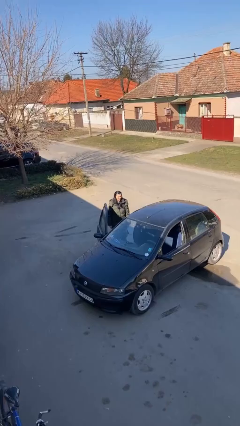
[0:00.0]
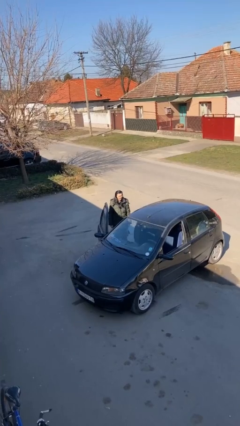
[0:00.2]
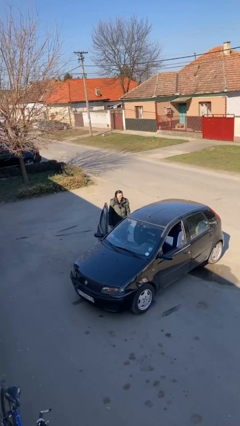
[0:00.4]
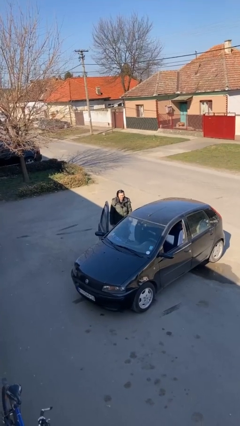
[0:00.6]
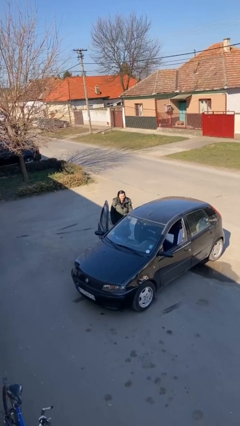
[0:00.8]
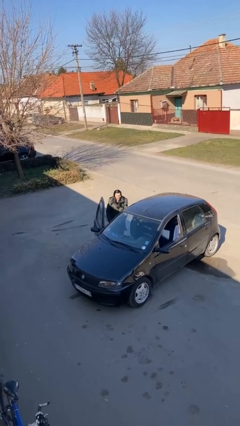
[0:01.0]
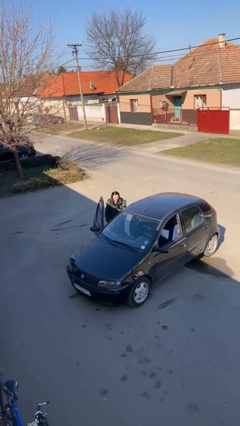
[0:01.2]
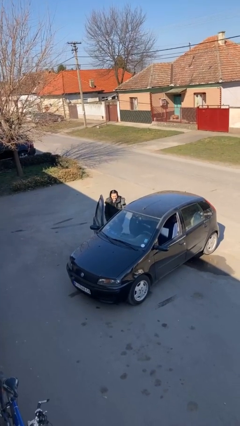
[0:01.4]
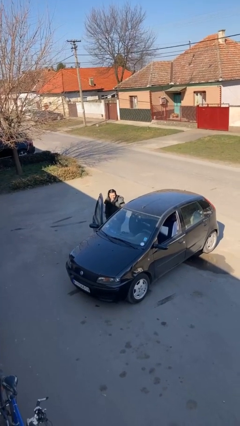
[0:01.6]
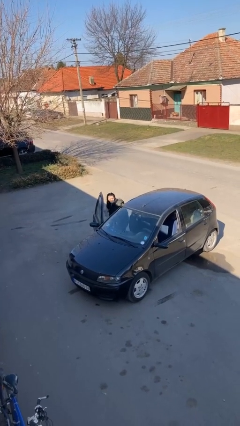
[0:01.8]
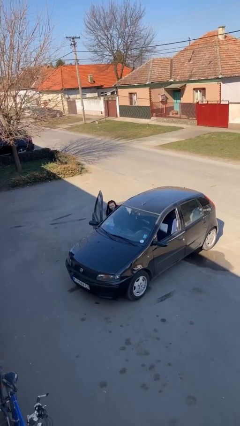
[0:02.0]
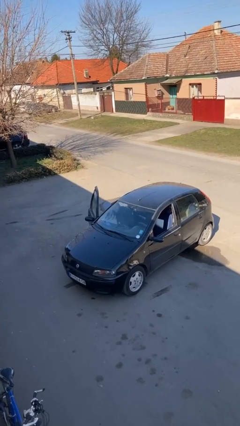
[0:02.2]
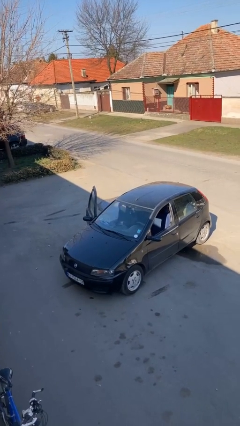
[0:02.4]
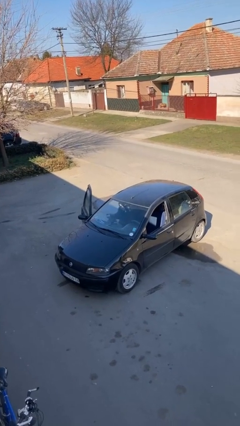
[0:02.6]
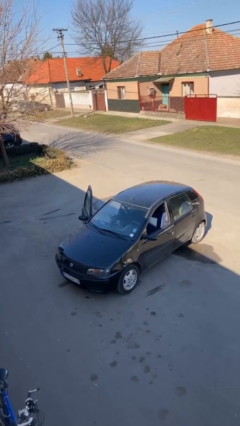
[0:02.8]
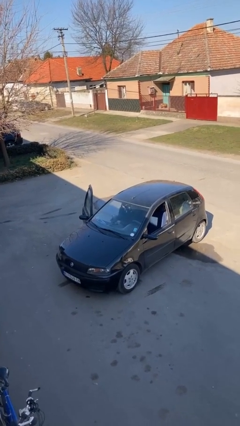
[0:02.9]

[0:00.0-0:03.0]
person enters car

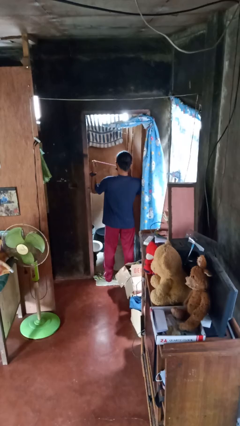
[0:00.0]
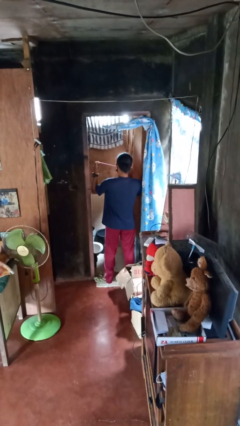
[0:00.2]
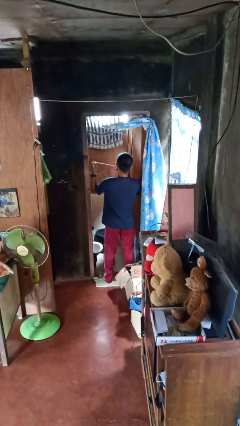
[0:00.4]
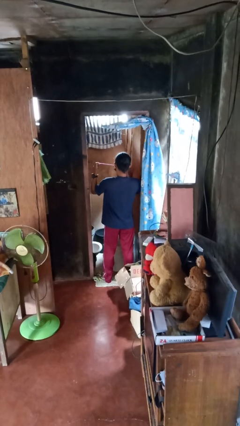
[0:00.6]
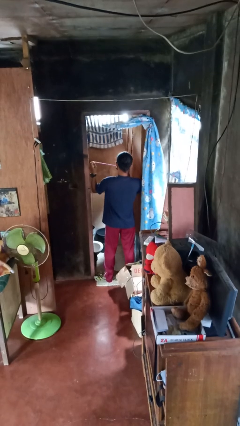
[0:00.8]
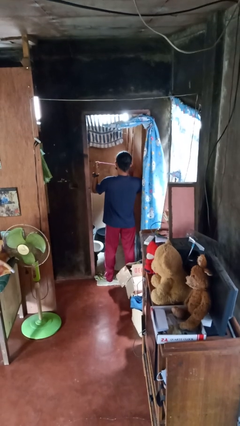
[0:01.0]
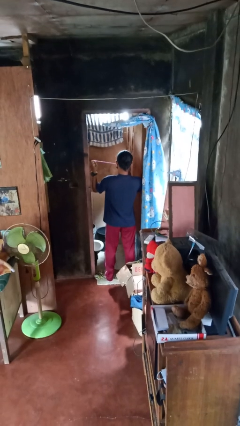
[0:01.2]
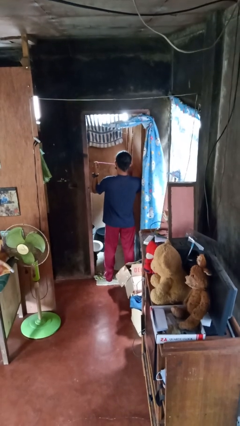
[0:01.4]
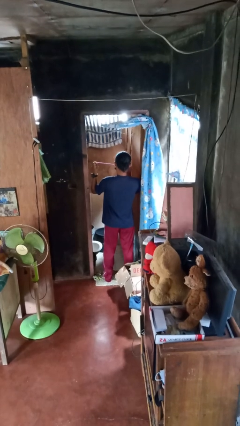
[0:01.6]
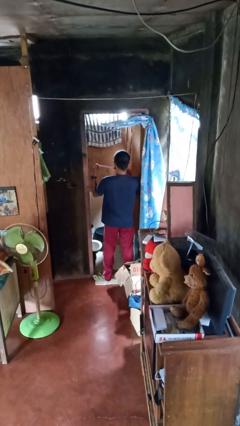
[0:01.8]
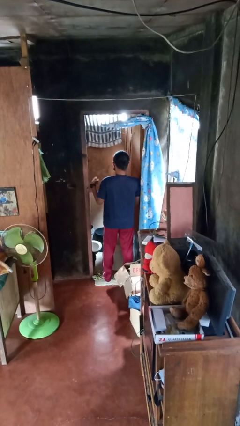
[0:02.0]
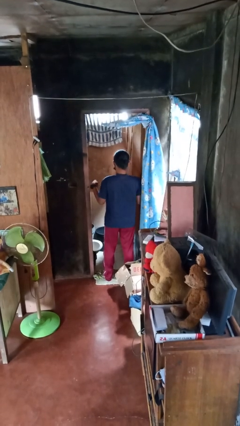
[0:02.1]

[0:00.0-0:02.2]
person flosses

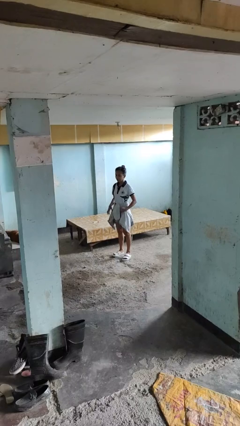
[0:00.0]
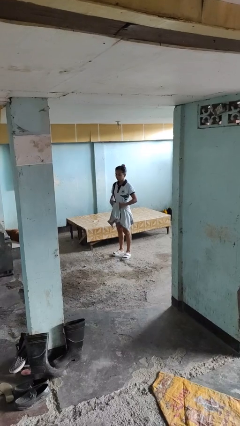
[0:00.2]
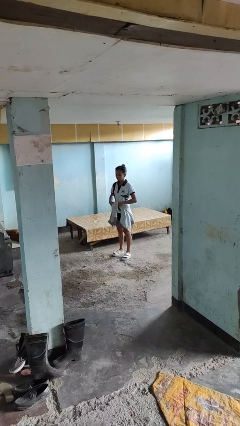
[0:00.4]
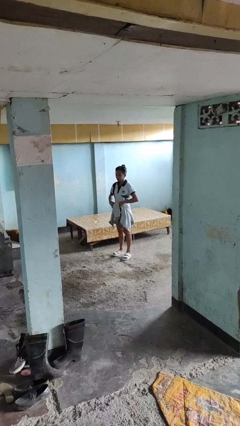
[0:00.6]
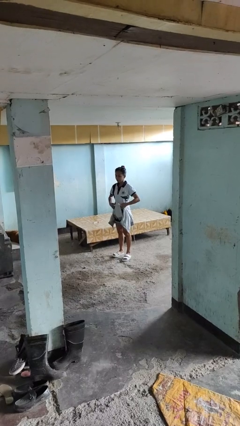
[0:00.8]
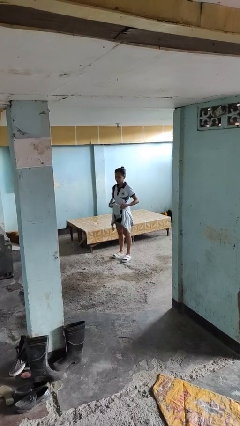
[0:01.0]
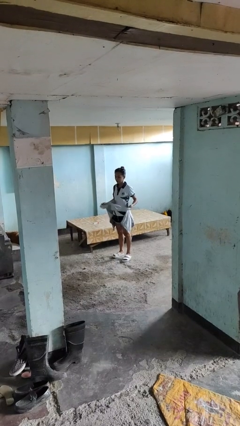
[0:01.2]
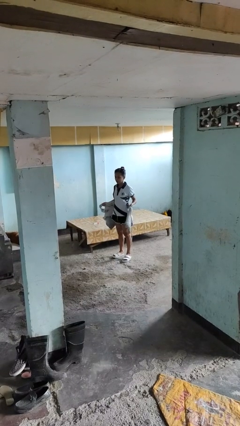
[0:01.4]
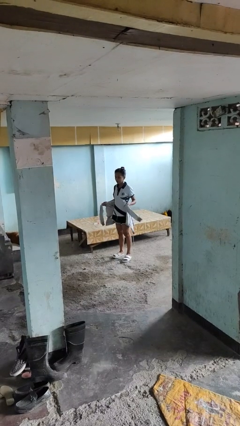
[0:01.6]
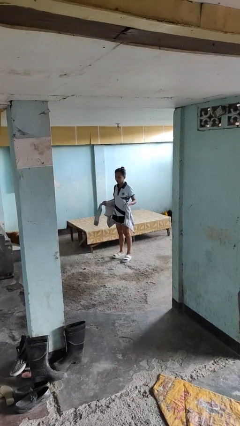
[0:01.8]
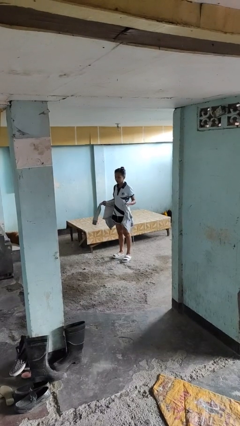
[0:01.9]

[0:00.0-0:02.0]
person unties jacket around waist

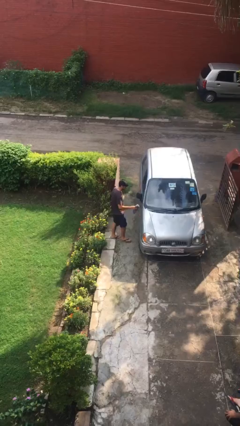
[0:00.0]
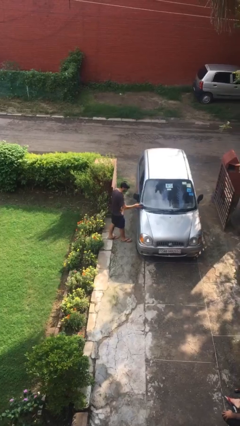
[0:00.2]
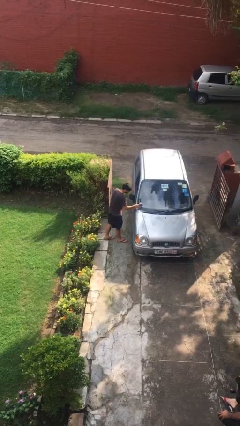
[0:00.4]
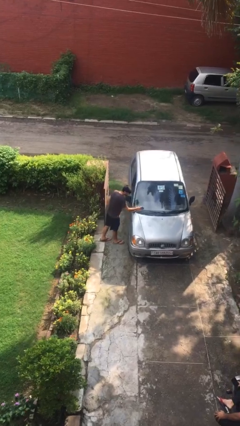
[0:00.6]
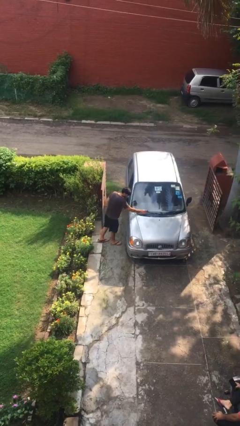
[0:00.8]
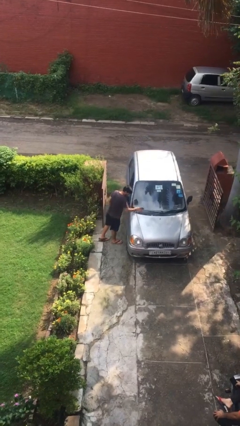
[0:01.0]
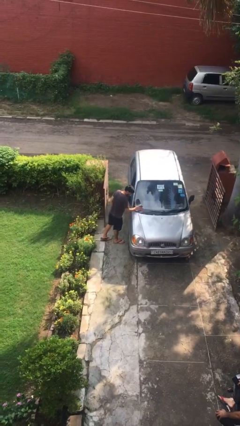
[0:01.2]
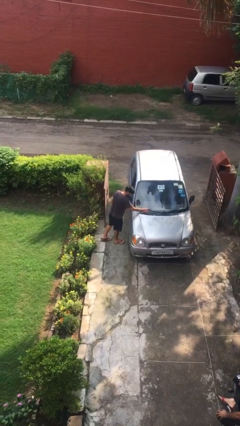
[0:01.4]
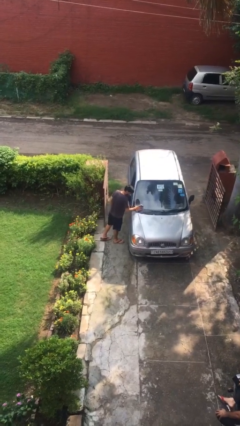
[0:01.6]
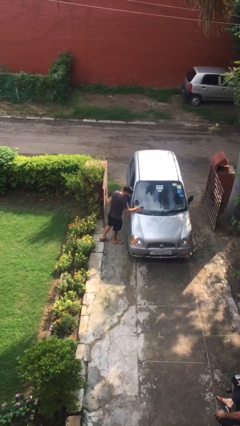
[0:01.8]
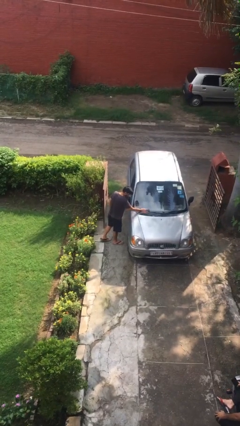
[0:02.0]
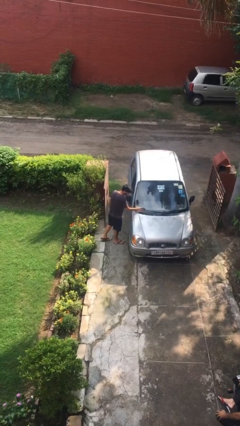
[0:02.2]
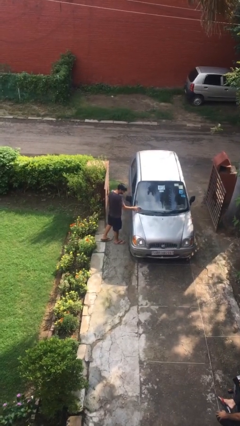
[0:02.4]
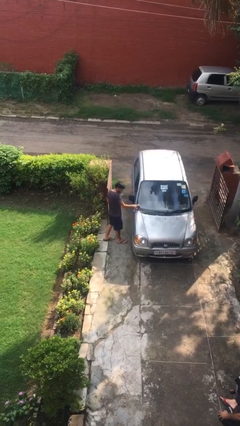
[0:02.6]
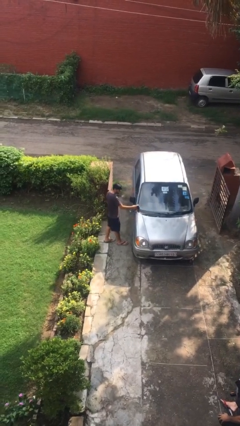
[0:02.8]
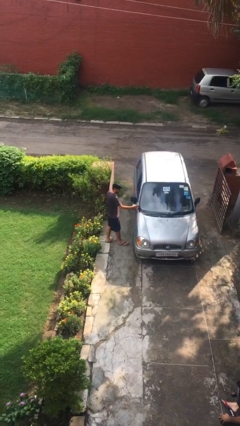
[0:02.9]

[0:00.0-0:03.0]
person polishes car with rag

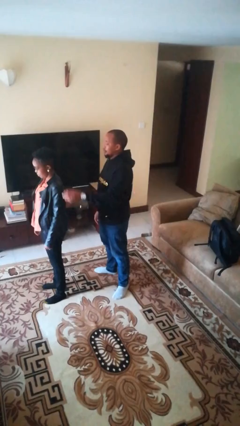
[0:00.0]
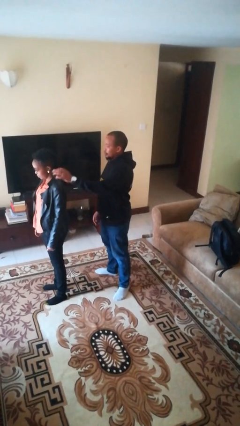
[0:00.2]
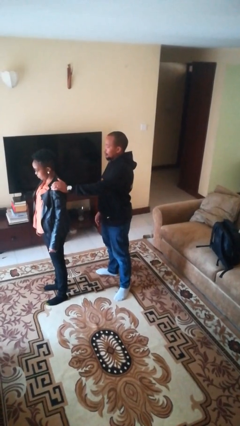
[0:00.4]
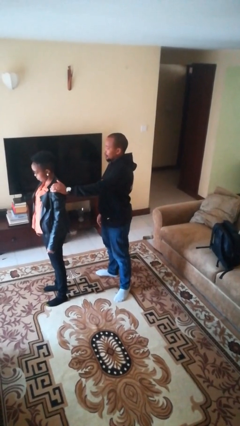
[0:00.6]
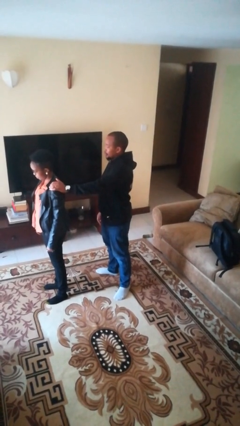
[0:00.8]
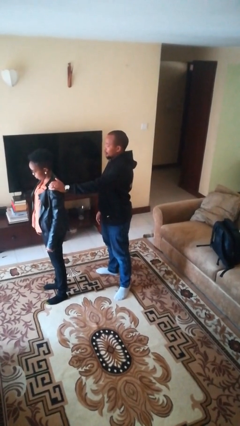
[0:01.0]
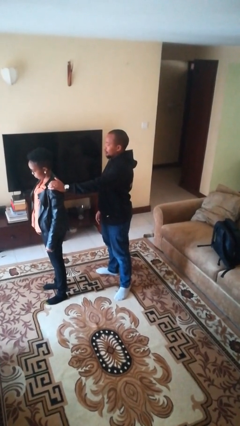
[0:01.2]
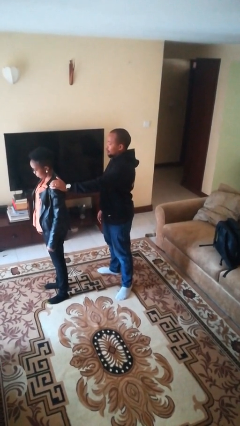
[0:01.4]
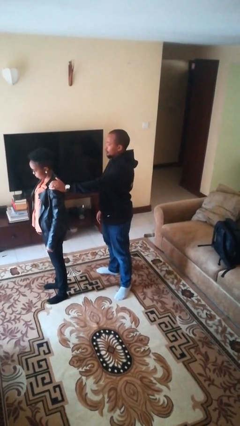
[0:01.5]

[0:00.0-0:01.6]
person grabs person by shoulder

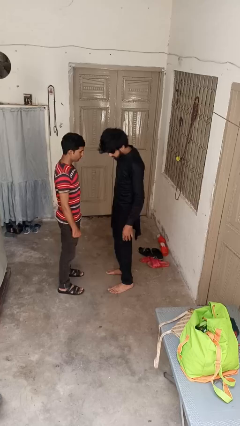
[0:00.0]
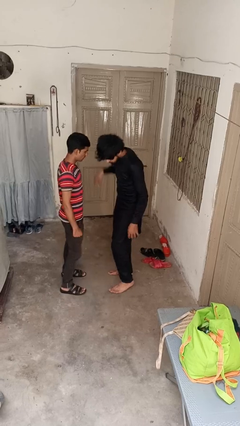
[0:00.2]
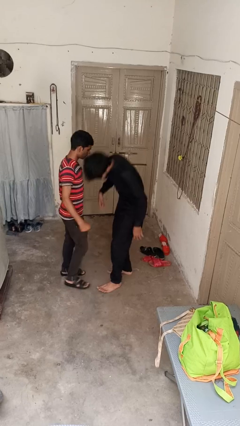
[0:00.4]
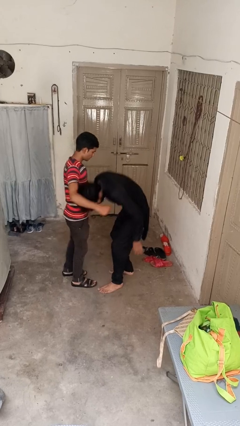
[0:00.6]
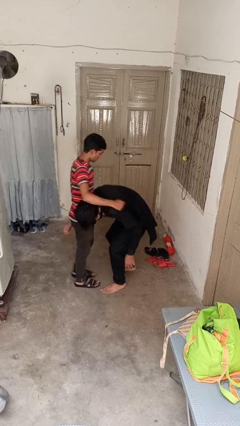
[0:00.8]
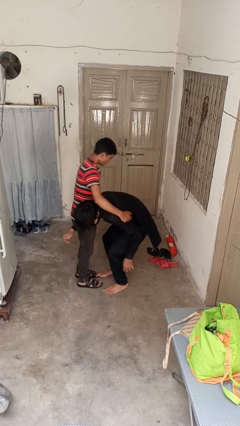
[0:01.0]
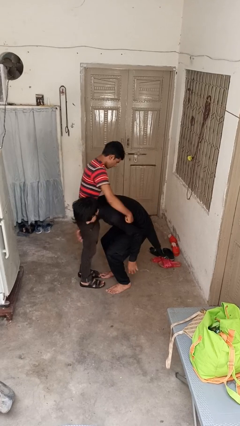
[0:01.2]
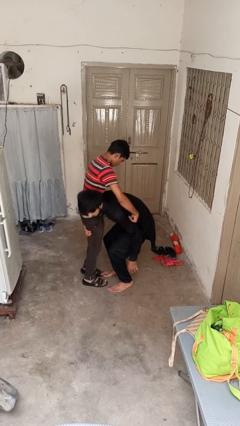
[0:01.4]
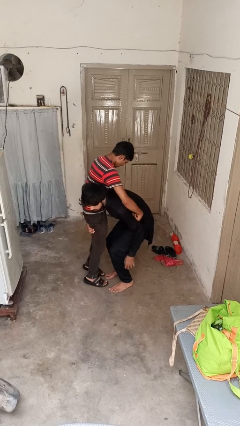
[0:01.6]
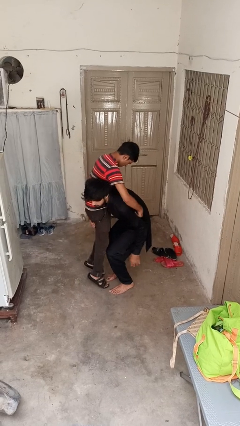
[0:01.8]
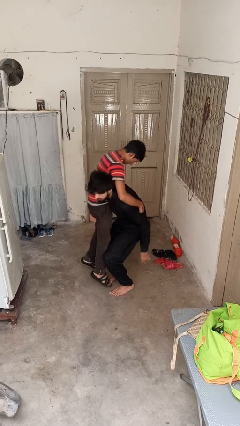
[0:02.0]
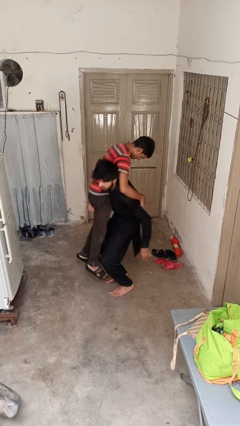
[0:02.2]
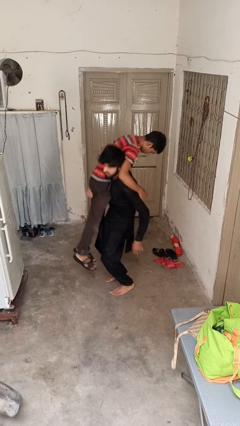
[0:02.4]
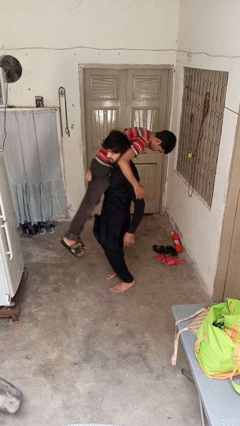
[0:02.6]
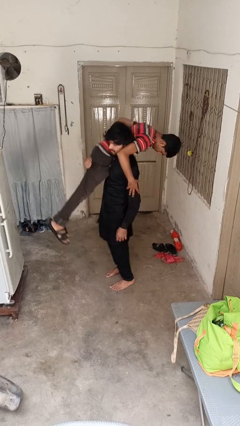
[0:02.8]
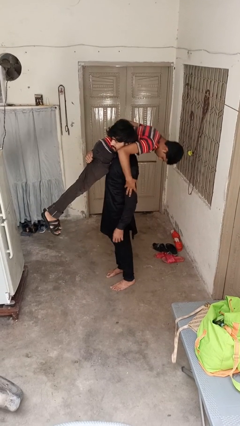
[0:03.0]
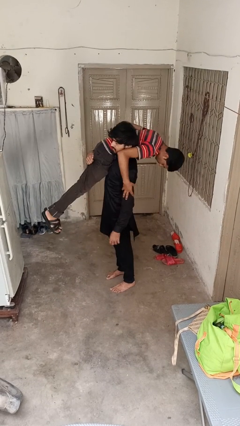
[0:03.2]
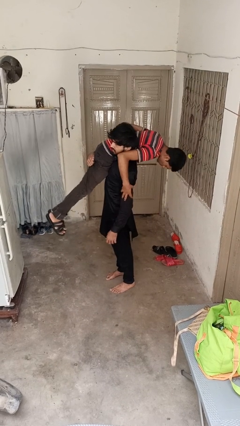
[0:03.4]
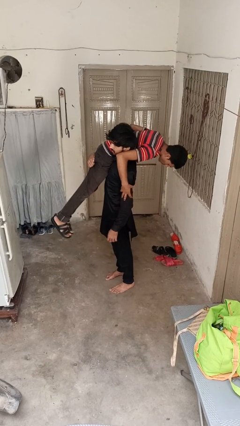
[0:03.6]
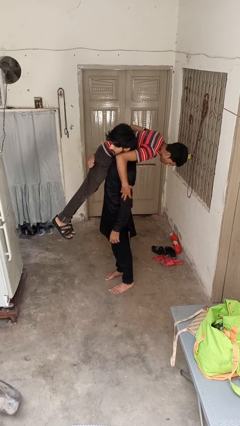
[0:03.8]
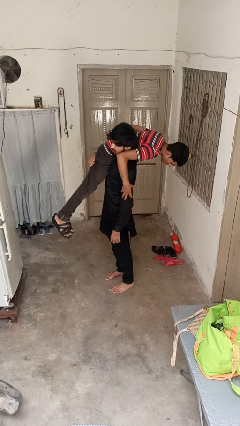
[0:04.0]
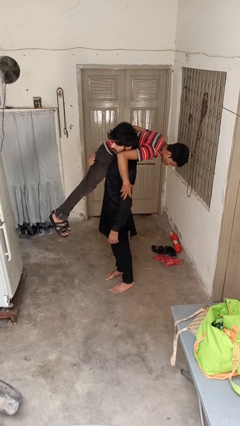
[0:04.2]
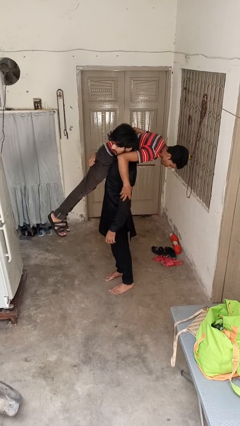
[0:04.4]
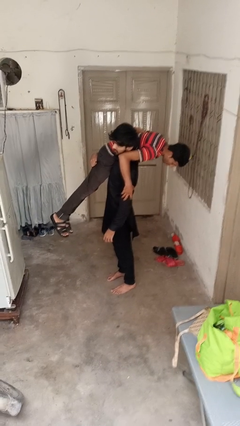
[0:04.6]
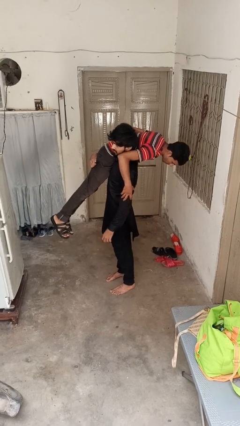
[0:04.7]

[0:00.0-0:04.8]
person carries person over shoulder

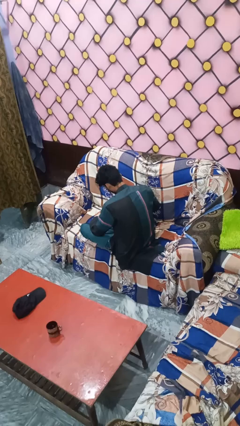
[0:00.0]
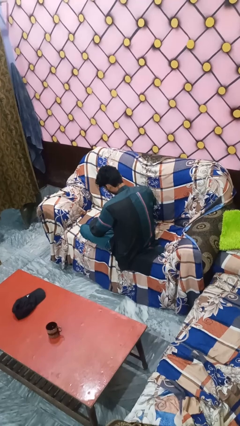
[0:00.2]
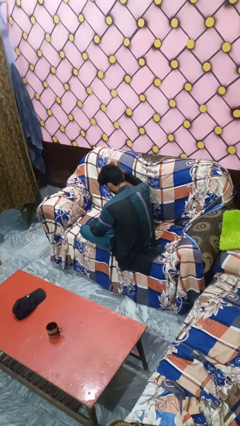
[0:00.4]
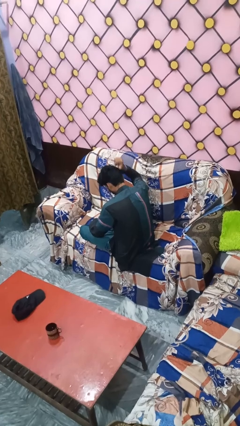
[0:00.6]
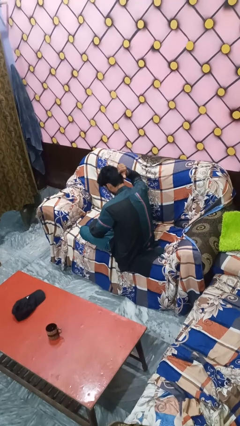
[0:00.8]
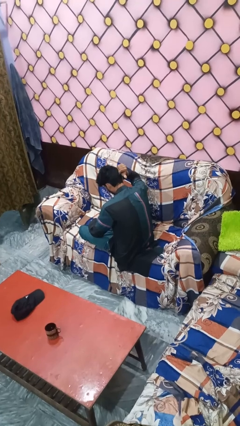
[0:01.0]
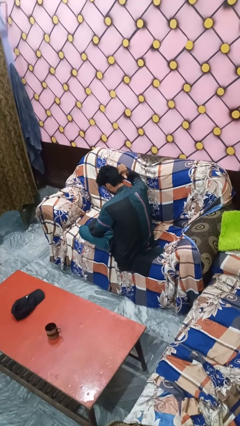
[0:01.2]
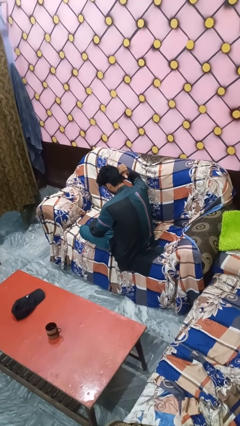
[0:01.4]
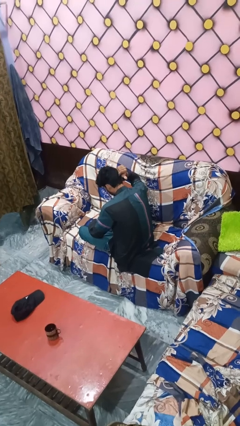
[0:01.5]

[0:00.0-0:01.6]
person gestures behind me
